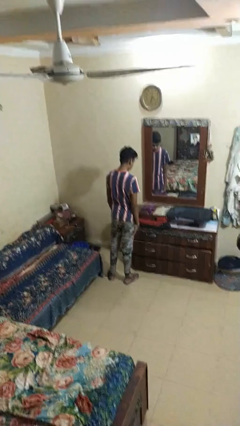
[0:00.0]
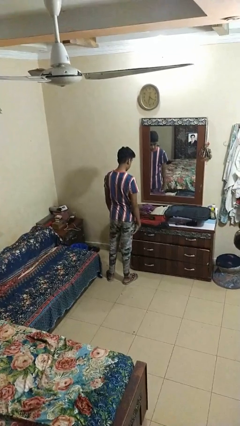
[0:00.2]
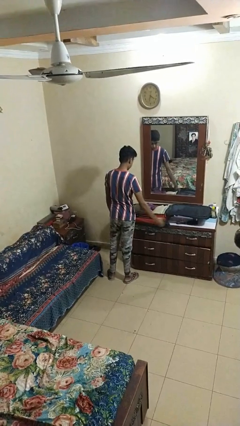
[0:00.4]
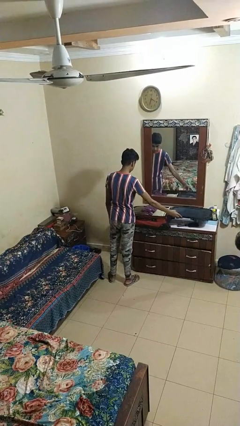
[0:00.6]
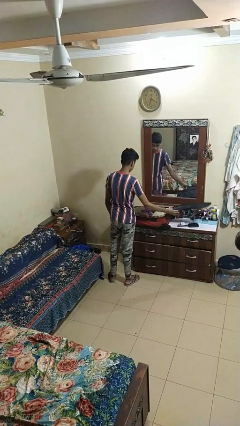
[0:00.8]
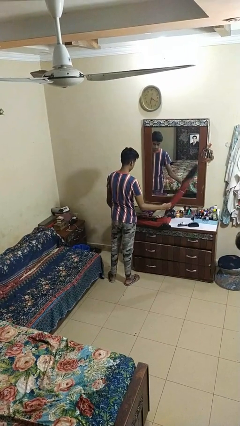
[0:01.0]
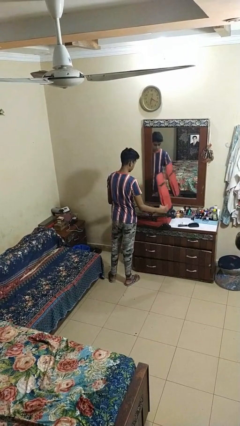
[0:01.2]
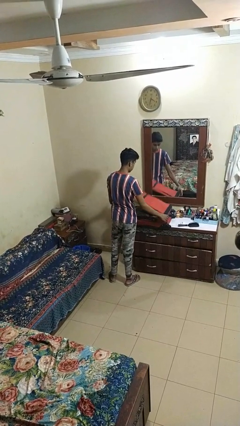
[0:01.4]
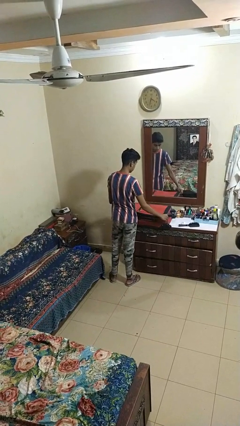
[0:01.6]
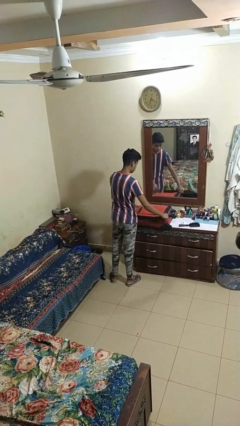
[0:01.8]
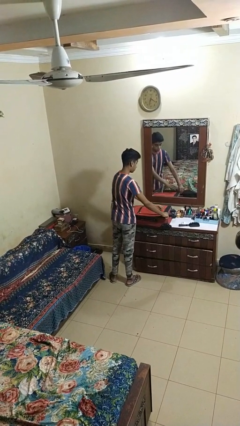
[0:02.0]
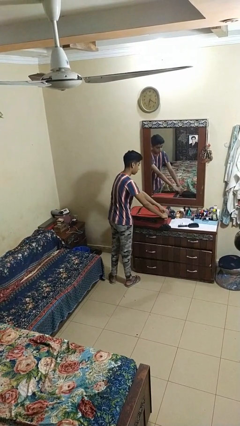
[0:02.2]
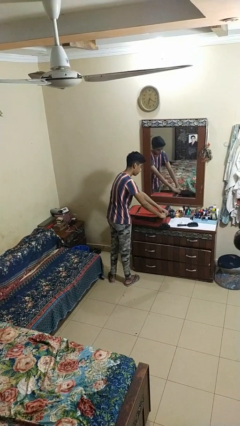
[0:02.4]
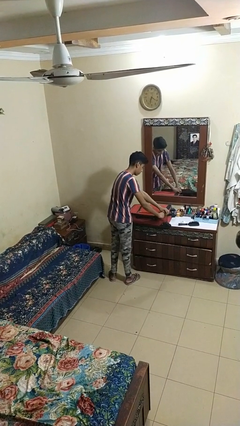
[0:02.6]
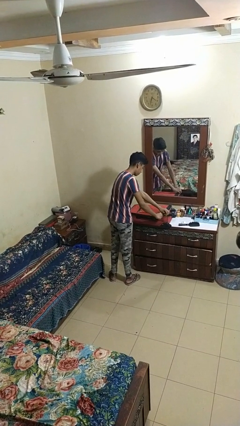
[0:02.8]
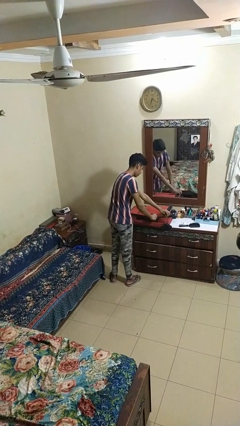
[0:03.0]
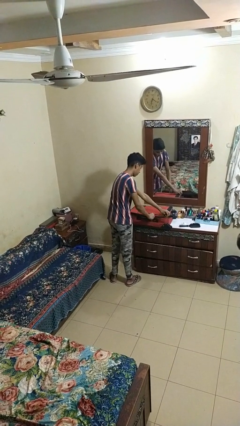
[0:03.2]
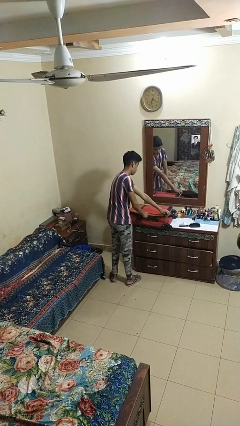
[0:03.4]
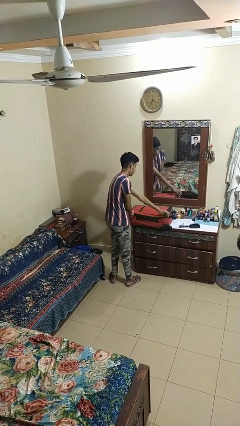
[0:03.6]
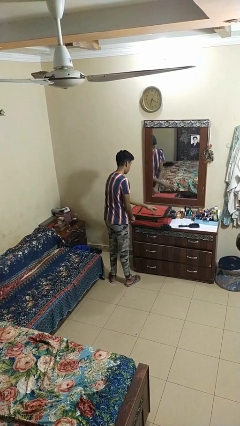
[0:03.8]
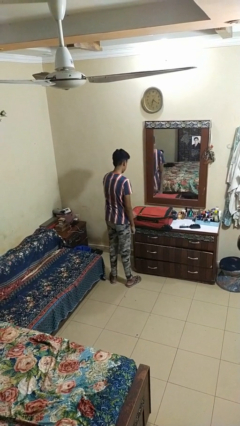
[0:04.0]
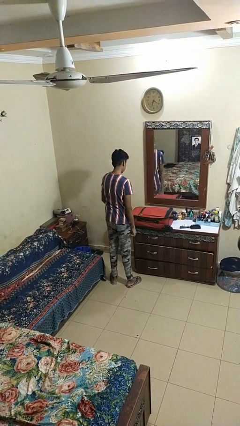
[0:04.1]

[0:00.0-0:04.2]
person closes suitcase

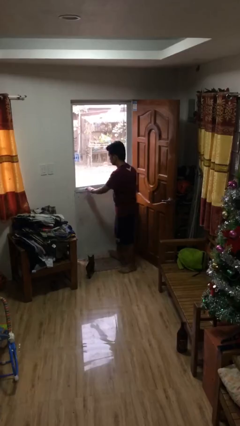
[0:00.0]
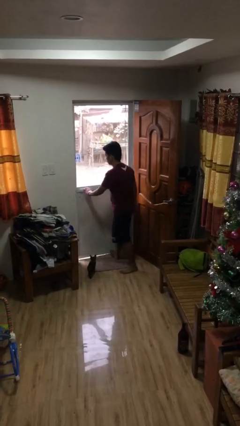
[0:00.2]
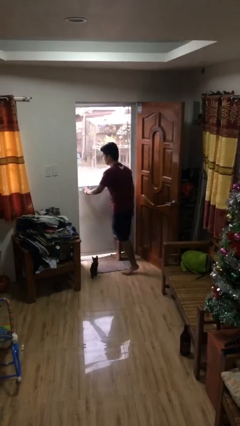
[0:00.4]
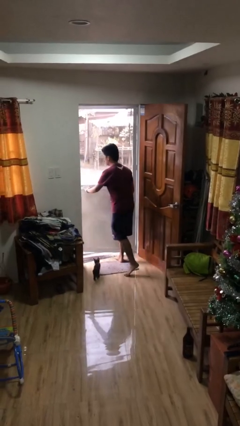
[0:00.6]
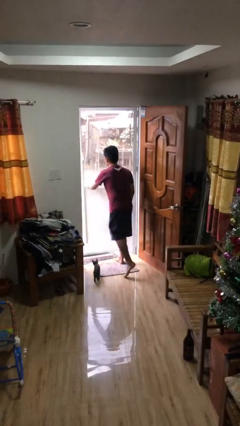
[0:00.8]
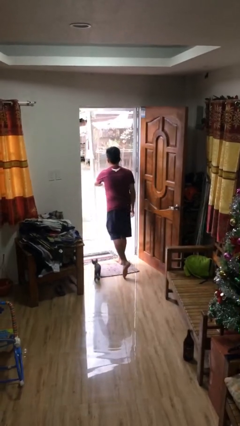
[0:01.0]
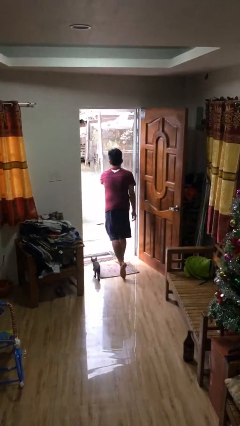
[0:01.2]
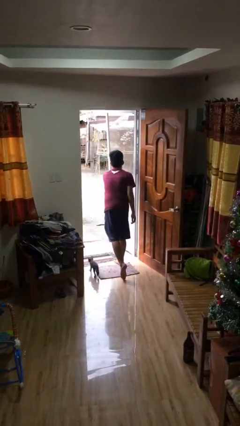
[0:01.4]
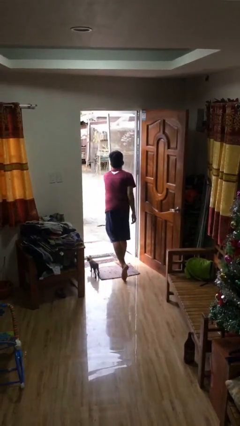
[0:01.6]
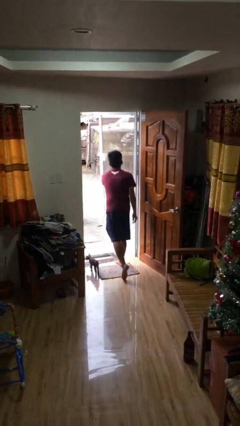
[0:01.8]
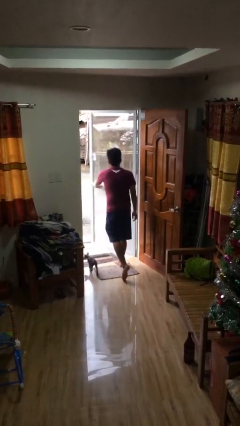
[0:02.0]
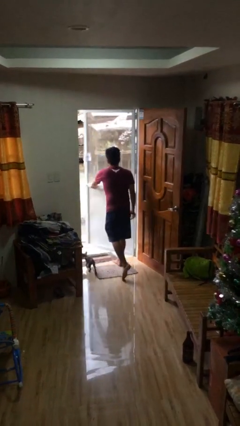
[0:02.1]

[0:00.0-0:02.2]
person opens facility door

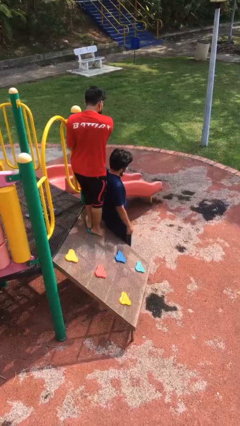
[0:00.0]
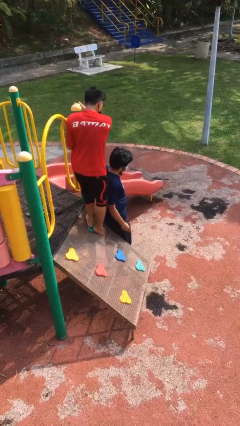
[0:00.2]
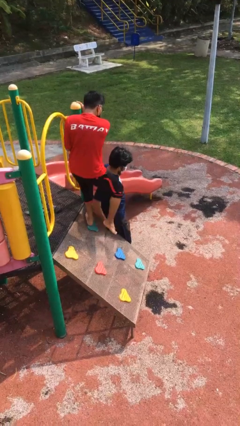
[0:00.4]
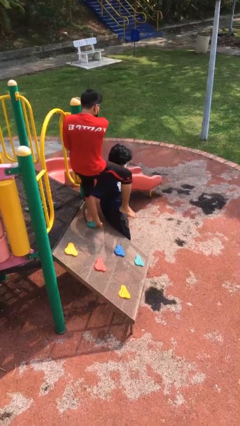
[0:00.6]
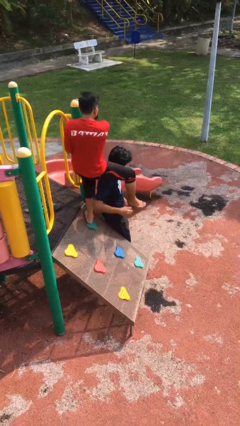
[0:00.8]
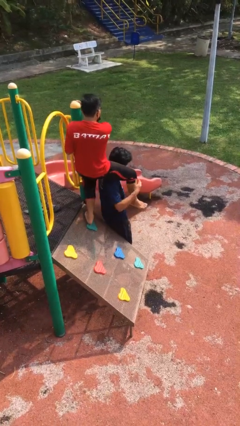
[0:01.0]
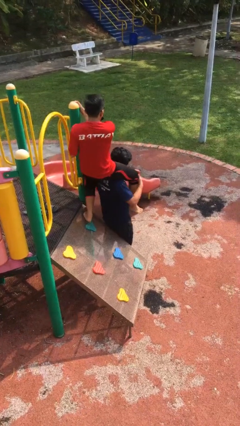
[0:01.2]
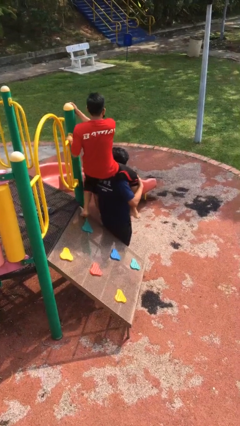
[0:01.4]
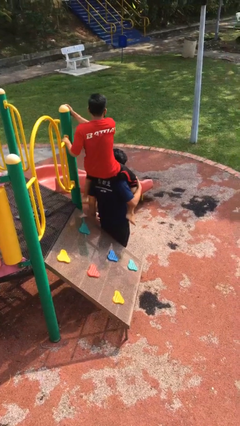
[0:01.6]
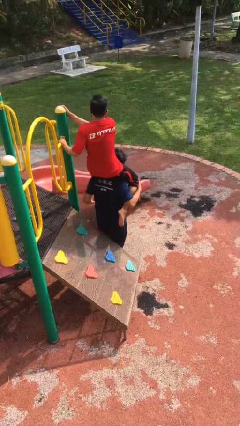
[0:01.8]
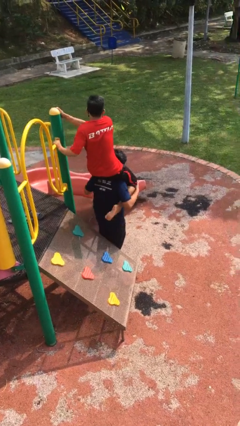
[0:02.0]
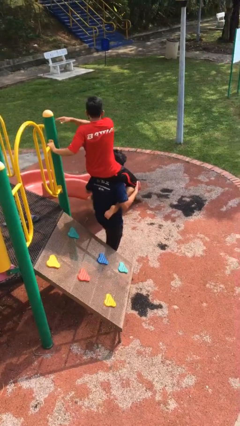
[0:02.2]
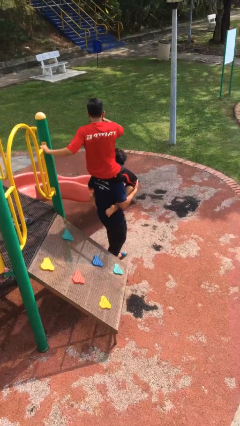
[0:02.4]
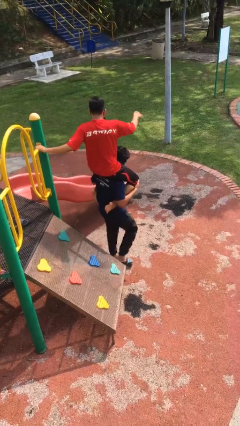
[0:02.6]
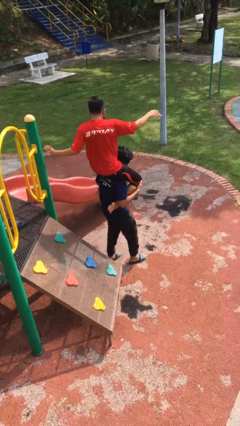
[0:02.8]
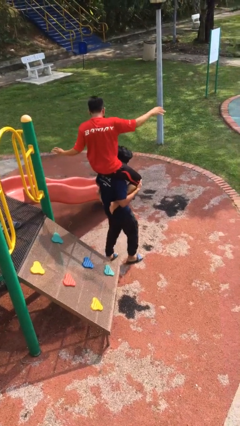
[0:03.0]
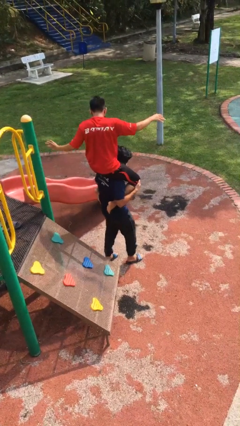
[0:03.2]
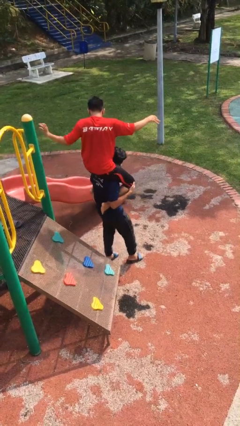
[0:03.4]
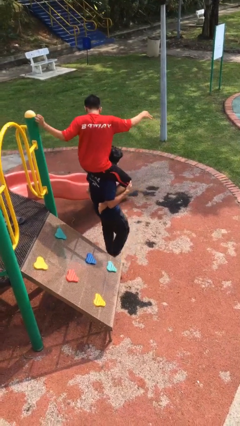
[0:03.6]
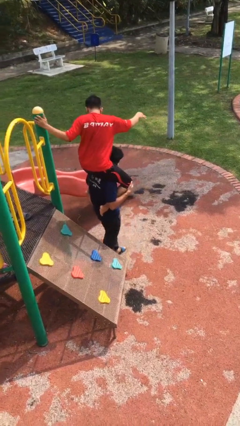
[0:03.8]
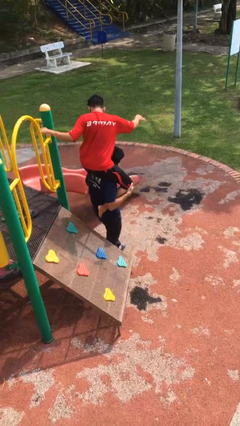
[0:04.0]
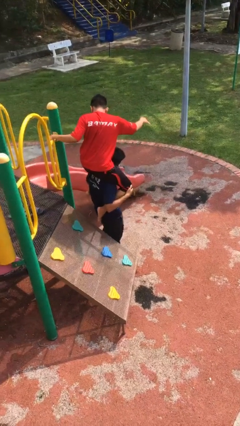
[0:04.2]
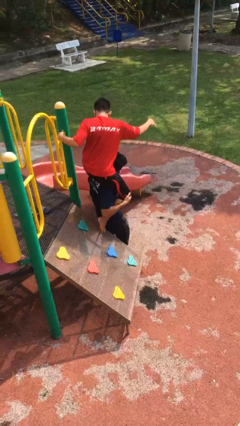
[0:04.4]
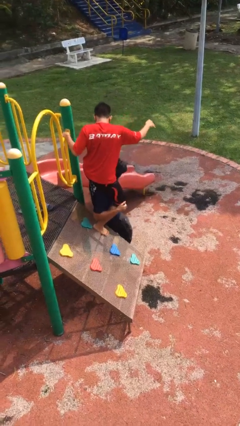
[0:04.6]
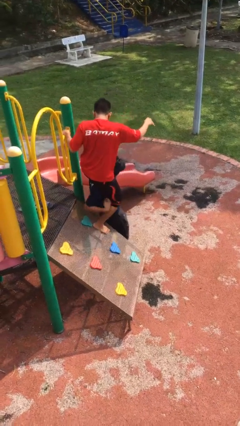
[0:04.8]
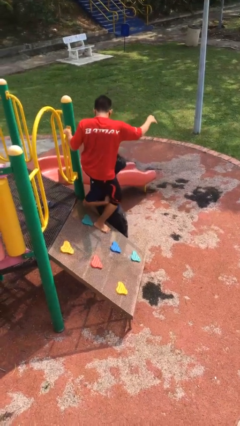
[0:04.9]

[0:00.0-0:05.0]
person carries person on shoulders

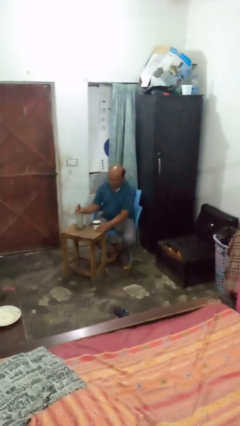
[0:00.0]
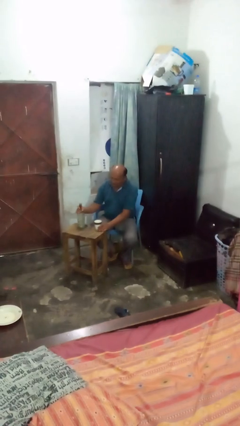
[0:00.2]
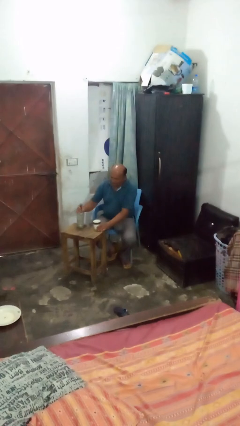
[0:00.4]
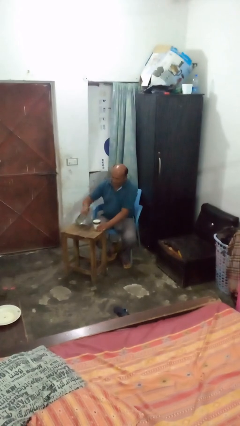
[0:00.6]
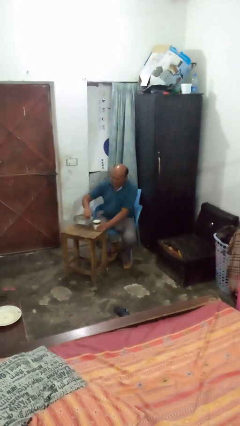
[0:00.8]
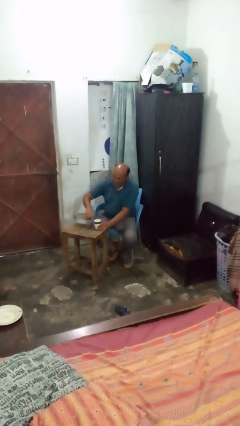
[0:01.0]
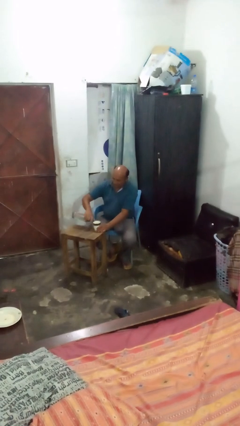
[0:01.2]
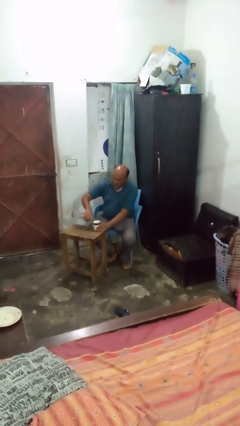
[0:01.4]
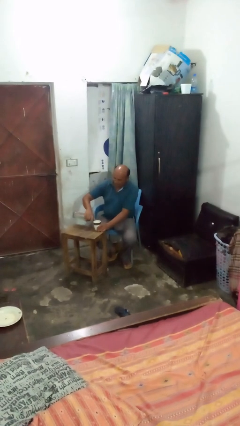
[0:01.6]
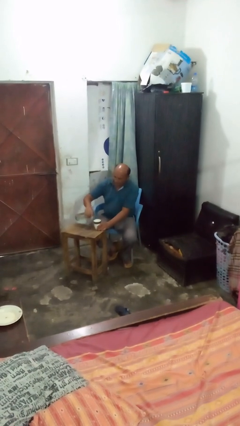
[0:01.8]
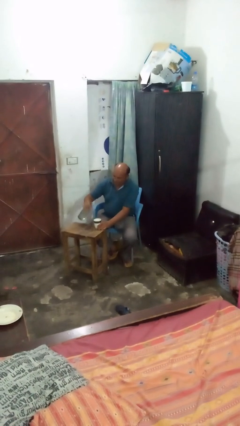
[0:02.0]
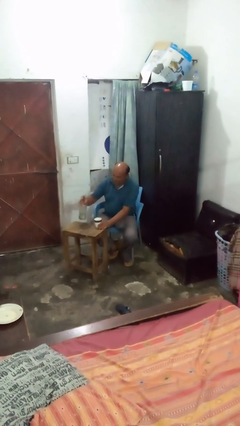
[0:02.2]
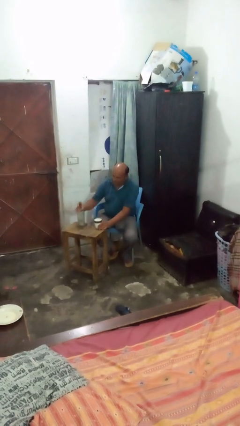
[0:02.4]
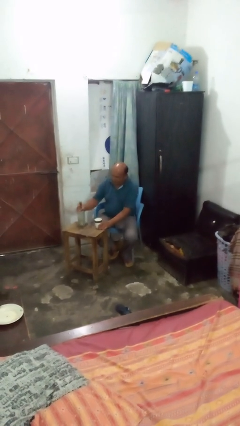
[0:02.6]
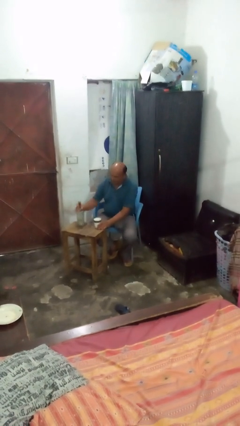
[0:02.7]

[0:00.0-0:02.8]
person pours liquid into cup

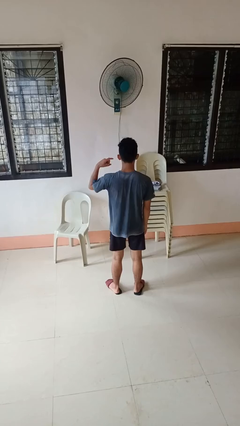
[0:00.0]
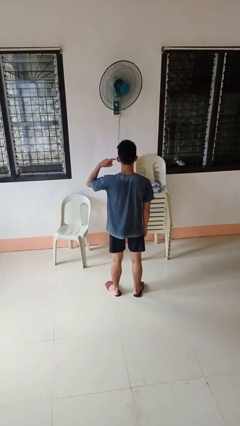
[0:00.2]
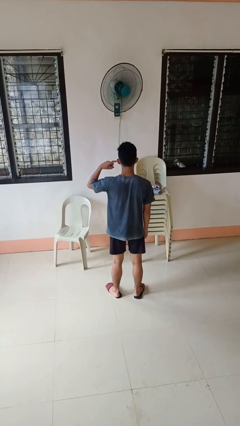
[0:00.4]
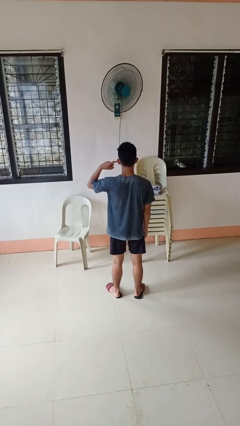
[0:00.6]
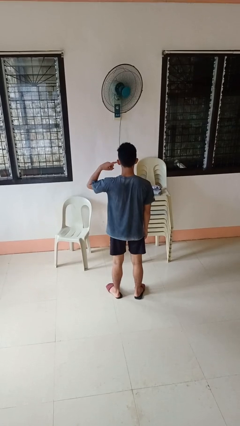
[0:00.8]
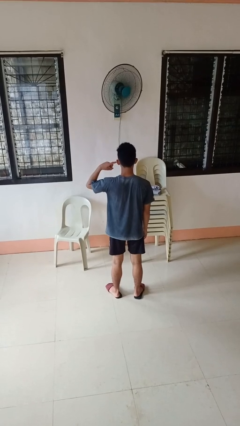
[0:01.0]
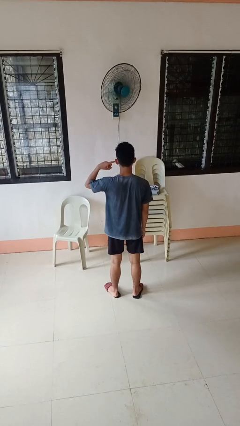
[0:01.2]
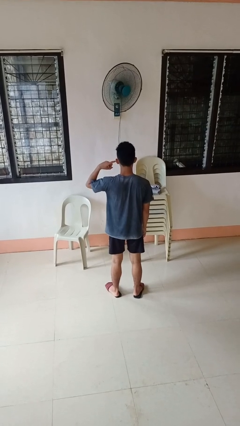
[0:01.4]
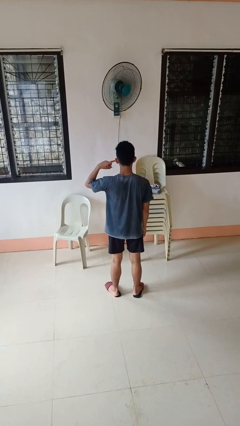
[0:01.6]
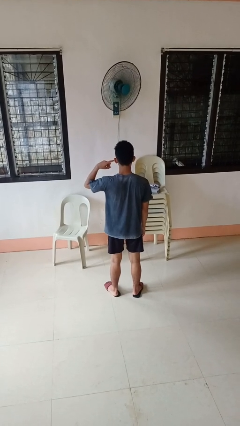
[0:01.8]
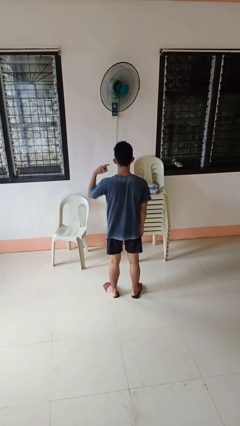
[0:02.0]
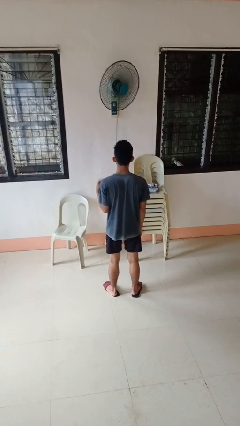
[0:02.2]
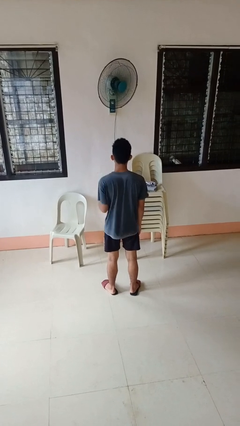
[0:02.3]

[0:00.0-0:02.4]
person gestures listen closely

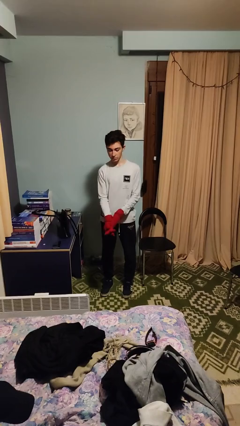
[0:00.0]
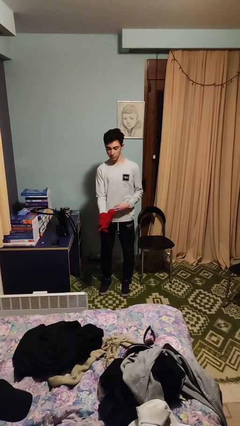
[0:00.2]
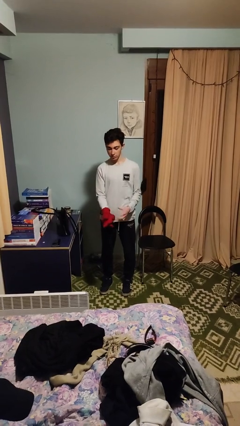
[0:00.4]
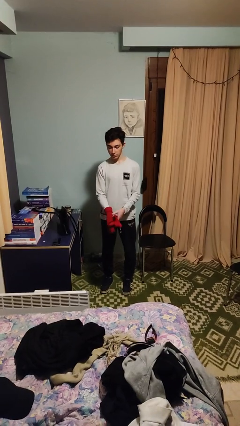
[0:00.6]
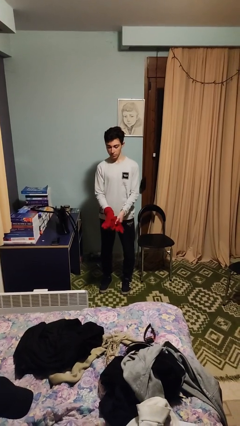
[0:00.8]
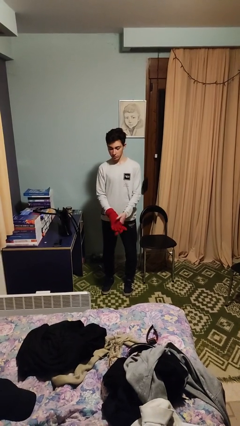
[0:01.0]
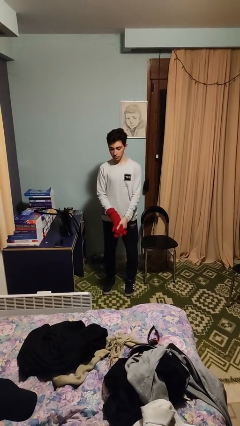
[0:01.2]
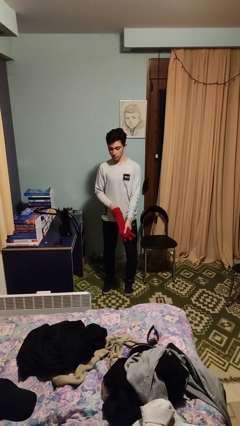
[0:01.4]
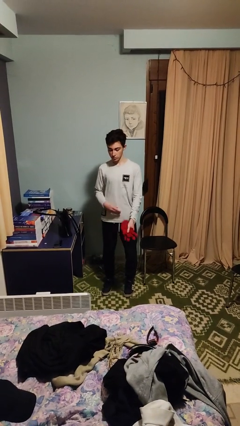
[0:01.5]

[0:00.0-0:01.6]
person takes off gloves
